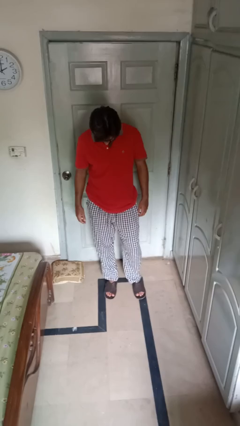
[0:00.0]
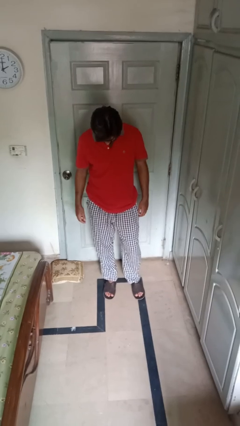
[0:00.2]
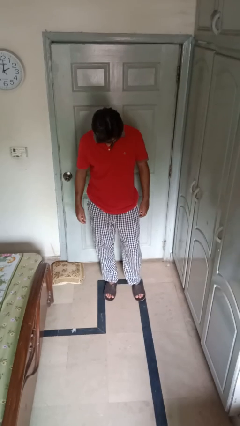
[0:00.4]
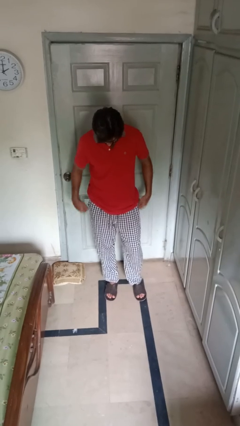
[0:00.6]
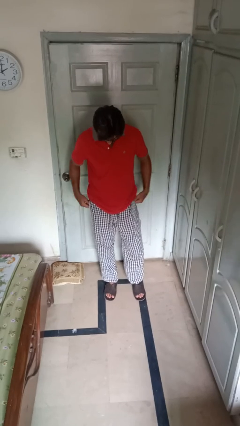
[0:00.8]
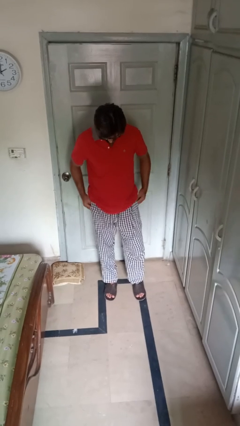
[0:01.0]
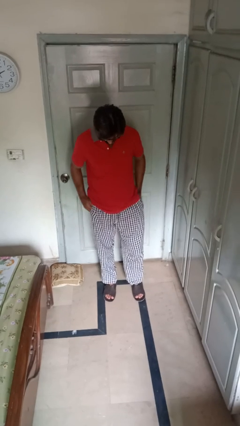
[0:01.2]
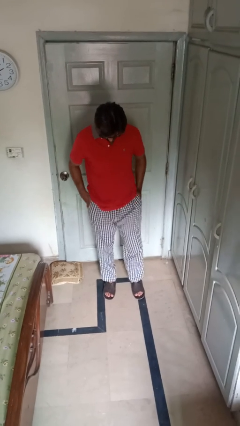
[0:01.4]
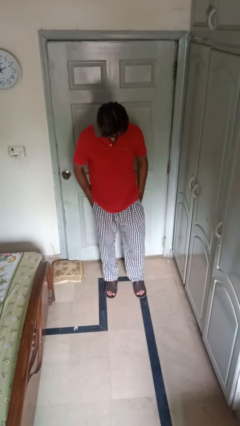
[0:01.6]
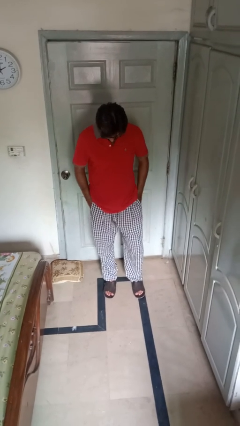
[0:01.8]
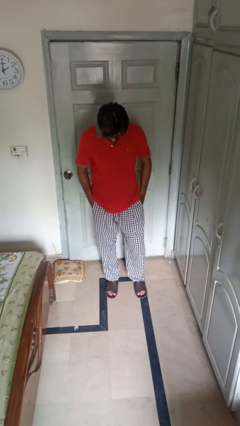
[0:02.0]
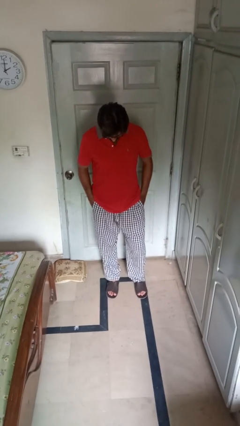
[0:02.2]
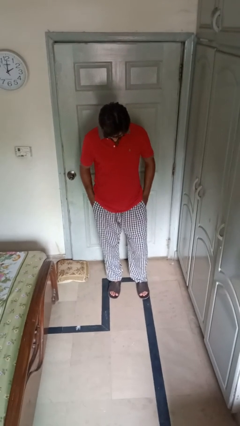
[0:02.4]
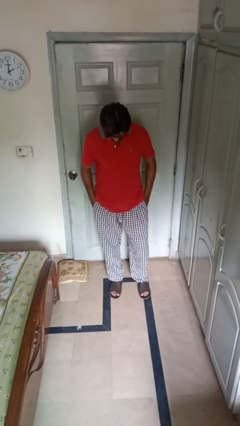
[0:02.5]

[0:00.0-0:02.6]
person puts hands in back pockets

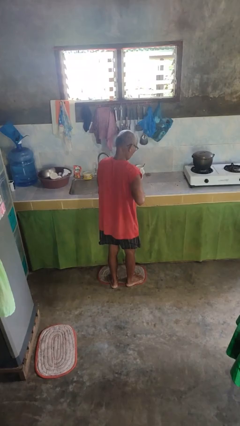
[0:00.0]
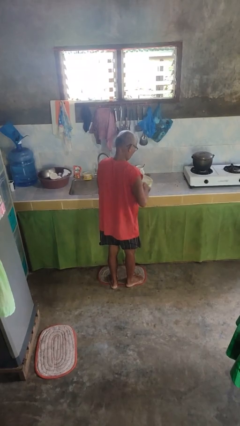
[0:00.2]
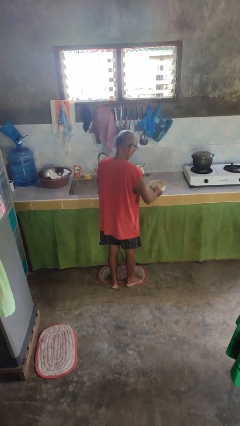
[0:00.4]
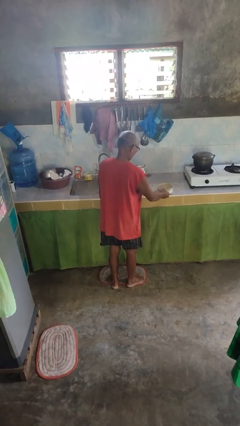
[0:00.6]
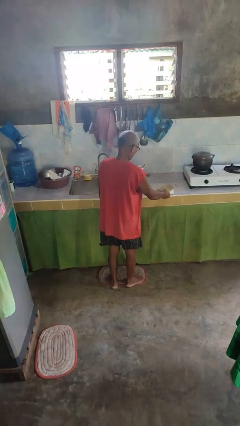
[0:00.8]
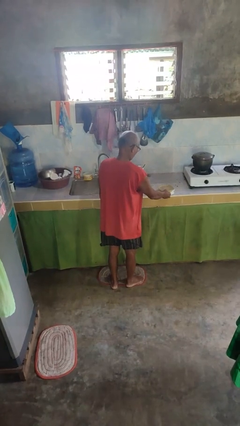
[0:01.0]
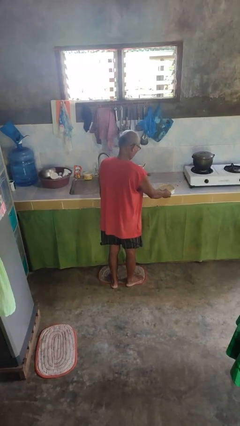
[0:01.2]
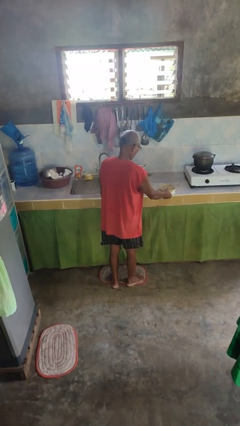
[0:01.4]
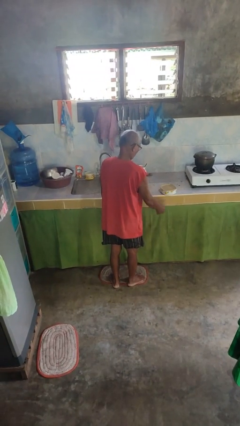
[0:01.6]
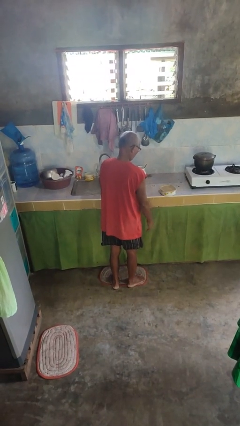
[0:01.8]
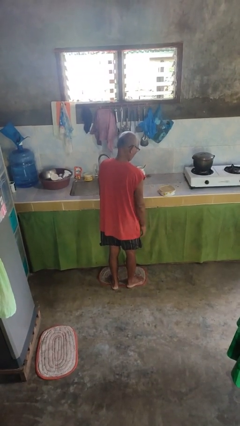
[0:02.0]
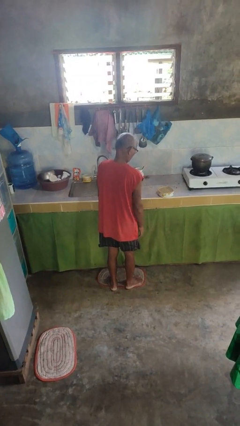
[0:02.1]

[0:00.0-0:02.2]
person puts down object on countertop

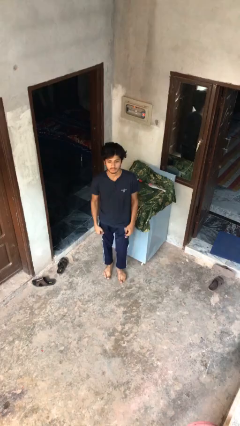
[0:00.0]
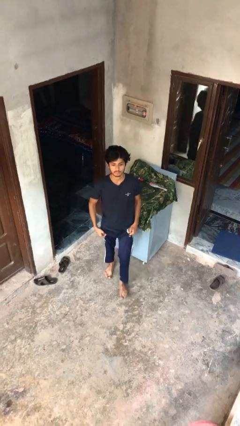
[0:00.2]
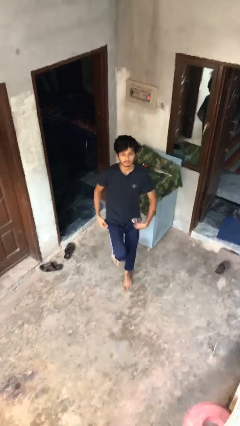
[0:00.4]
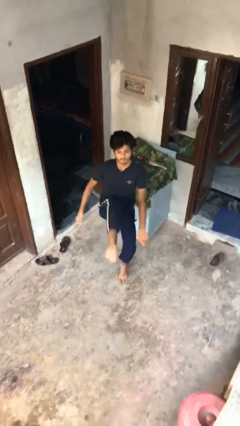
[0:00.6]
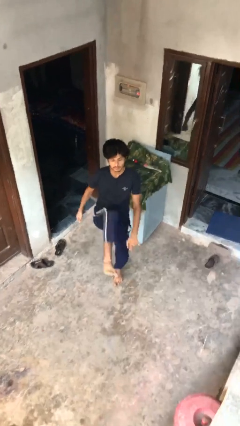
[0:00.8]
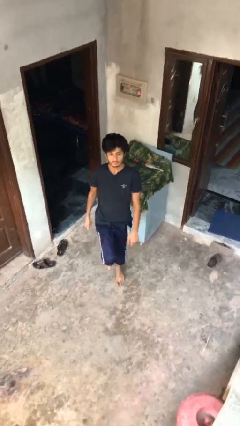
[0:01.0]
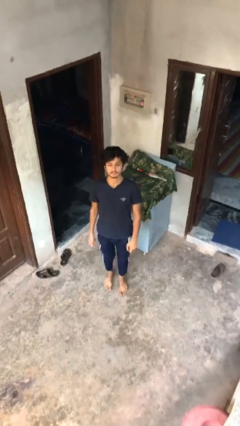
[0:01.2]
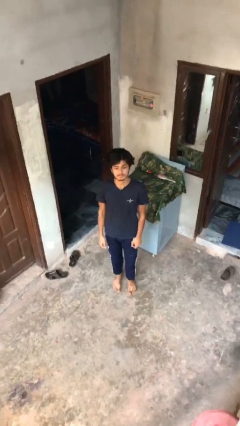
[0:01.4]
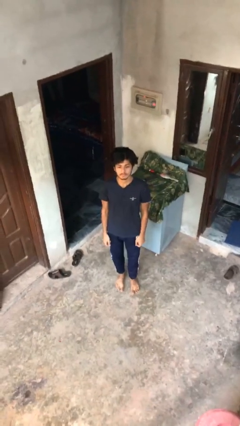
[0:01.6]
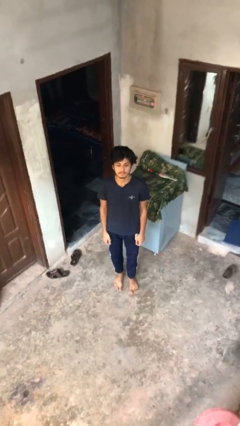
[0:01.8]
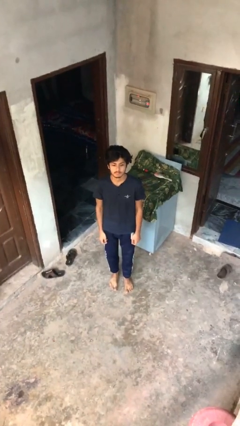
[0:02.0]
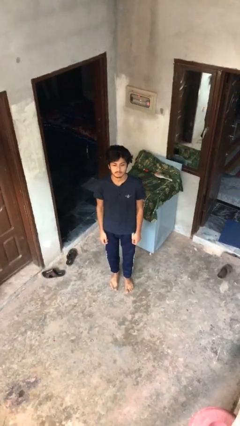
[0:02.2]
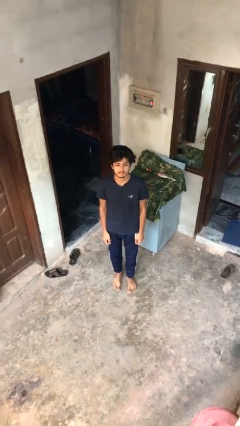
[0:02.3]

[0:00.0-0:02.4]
person karate kicks

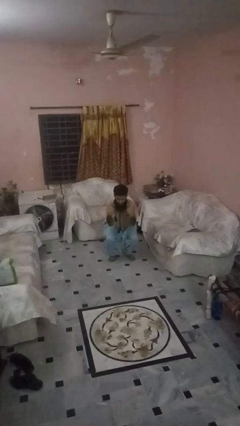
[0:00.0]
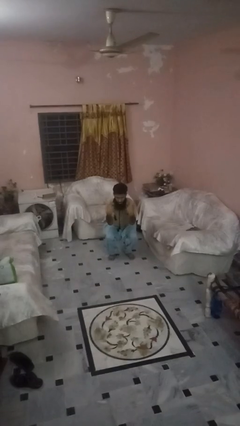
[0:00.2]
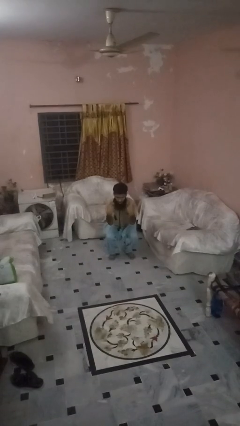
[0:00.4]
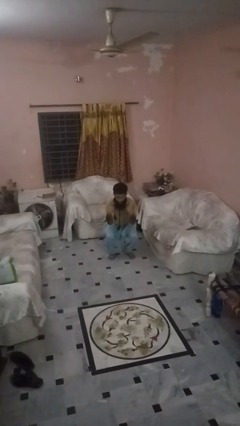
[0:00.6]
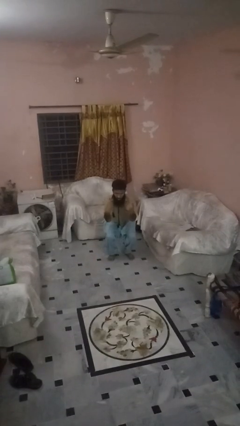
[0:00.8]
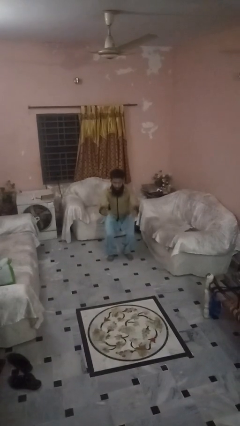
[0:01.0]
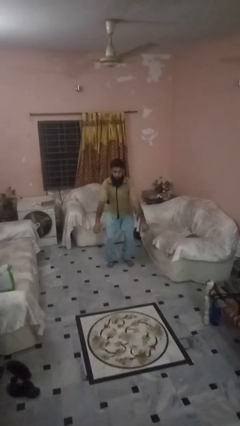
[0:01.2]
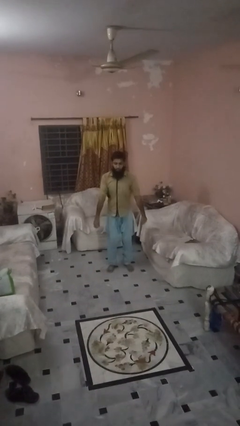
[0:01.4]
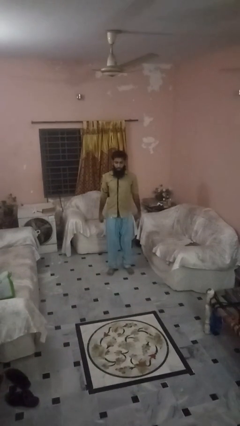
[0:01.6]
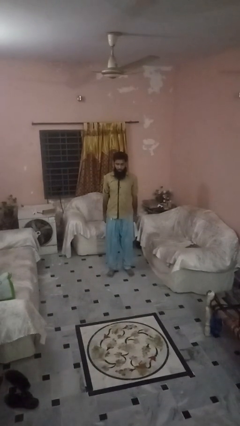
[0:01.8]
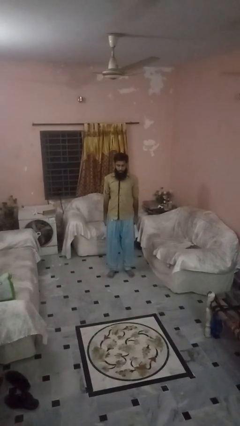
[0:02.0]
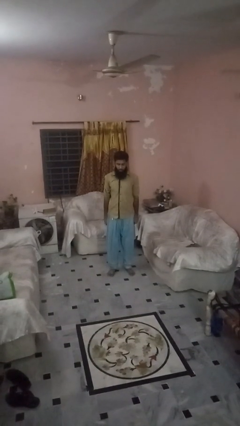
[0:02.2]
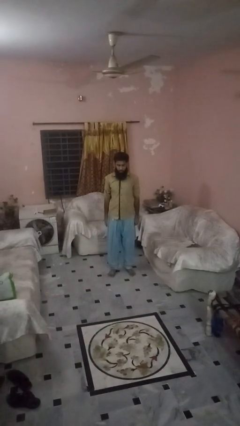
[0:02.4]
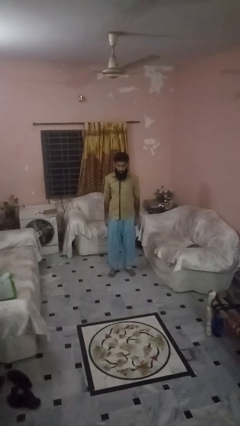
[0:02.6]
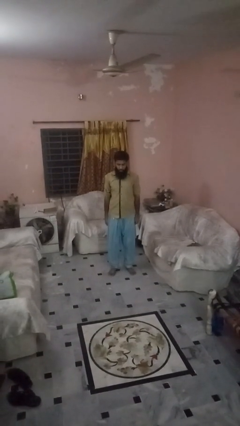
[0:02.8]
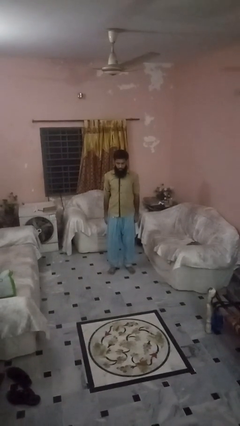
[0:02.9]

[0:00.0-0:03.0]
person stands up

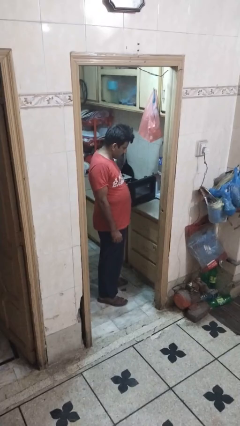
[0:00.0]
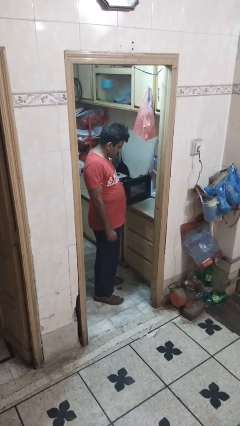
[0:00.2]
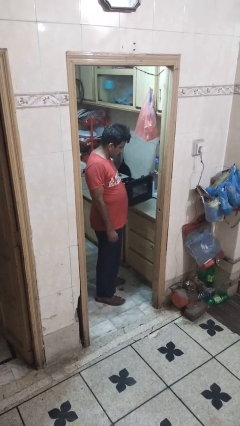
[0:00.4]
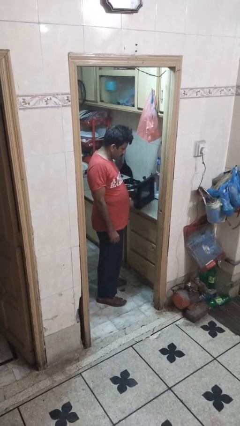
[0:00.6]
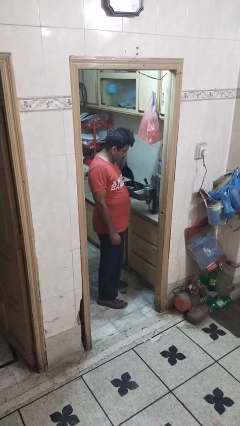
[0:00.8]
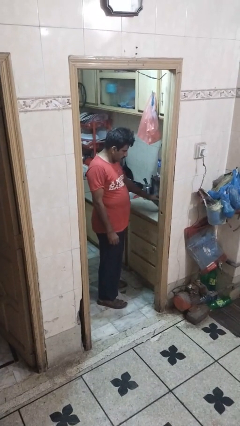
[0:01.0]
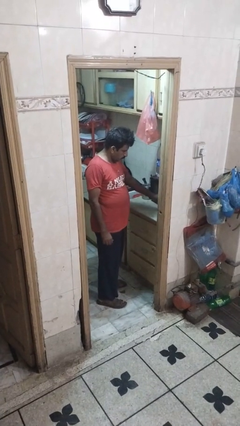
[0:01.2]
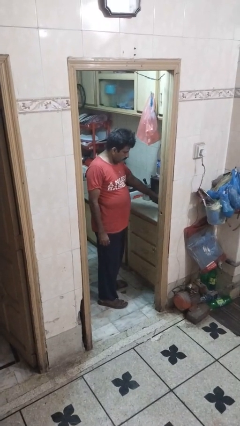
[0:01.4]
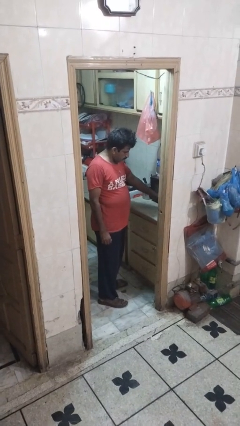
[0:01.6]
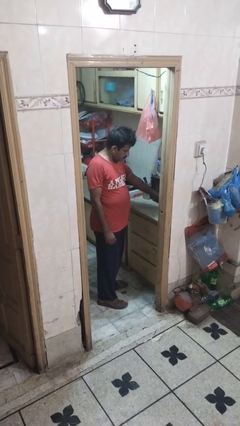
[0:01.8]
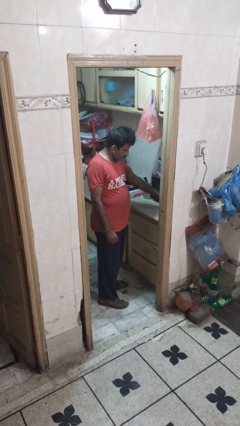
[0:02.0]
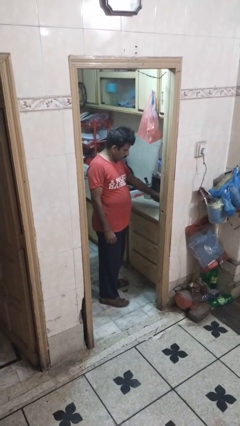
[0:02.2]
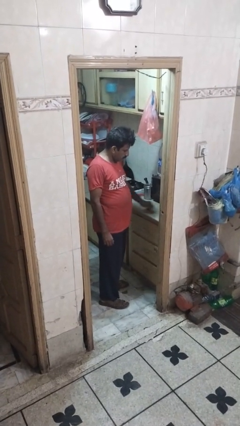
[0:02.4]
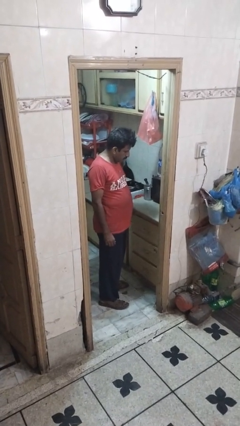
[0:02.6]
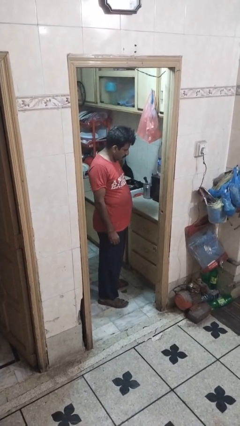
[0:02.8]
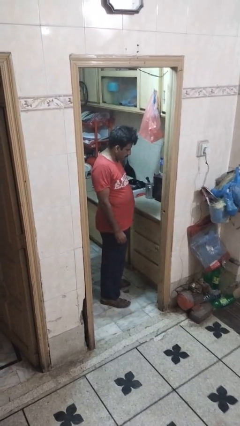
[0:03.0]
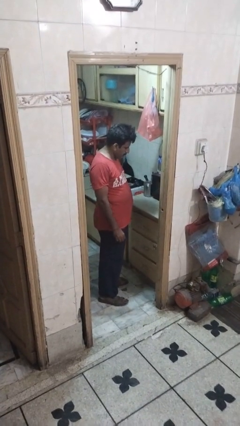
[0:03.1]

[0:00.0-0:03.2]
person closes oven door

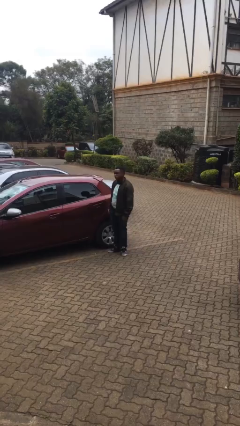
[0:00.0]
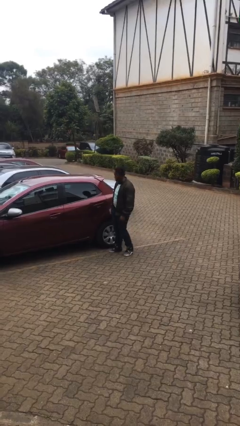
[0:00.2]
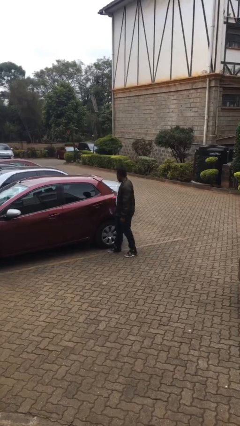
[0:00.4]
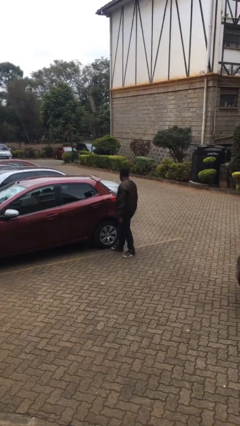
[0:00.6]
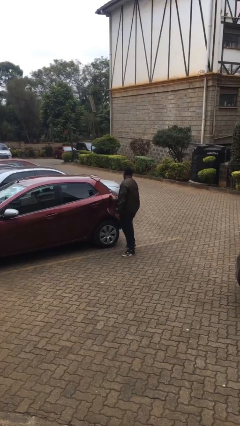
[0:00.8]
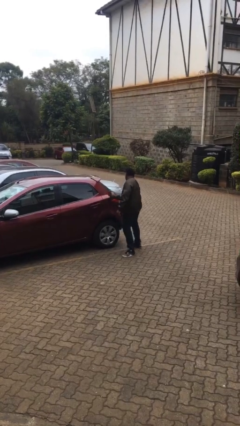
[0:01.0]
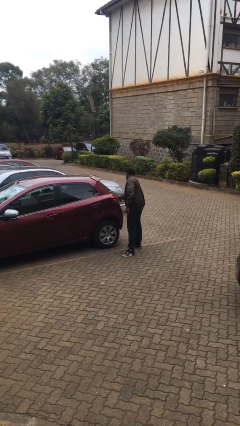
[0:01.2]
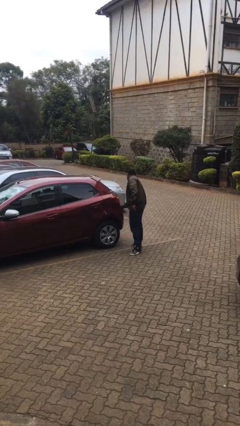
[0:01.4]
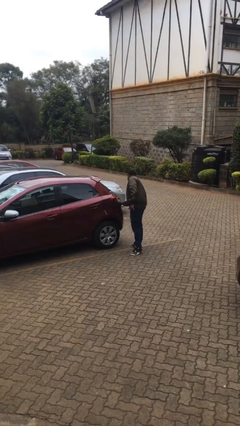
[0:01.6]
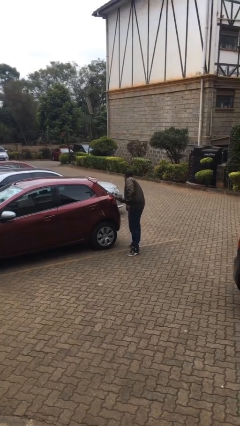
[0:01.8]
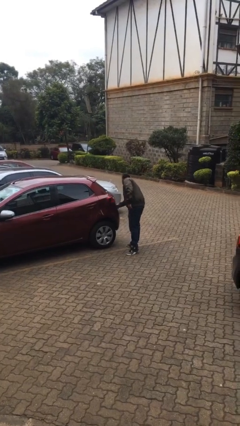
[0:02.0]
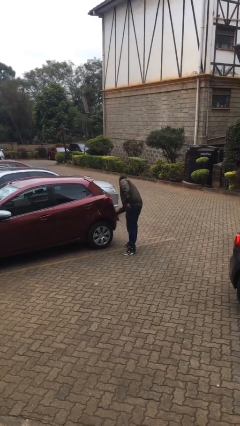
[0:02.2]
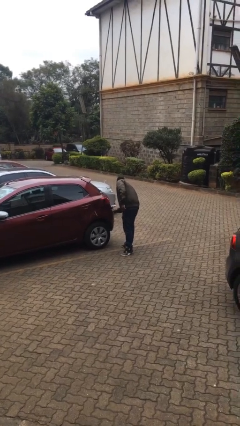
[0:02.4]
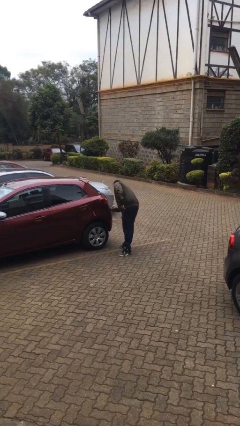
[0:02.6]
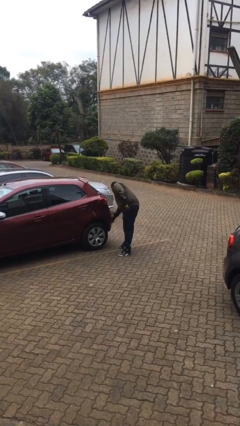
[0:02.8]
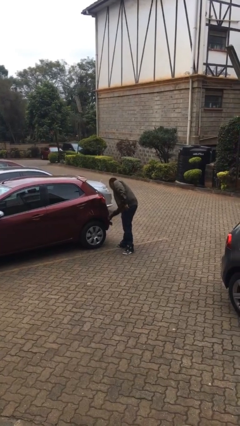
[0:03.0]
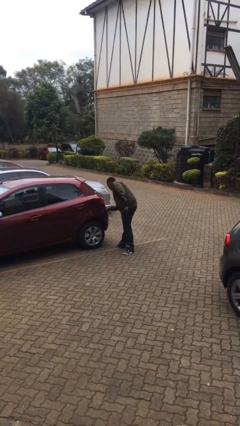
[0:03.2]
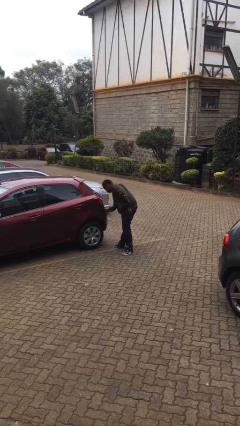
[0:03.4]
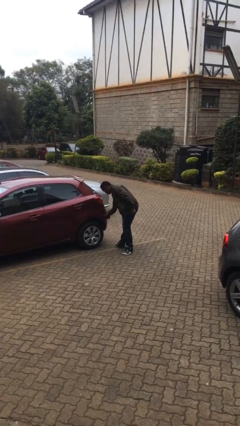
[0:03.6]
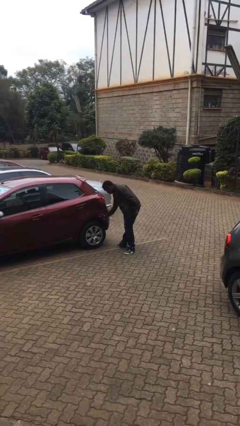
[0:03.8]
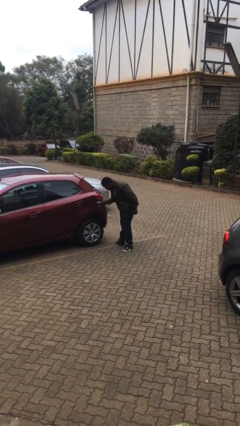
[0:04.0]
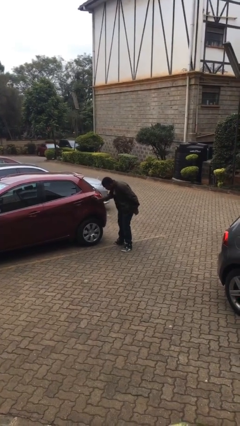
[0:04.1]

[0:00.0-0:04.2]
person polishes car with rag
